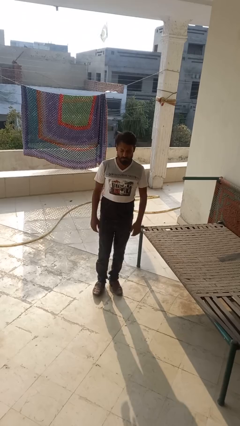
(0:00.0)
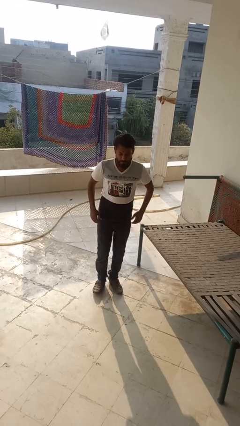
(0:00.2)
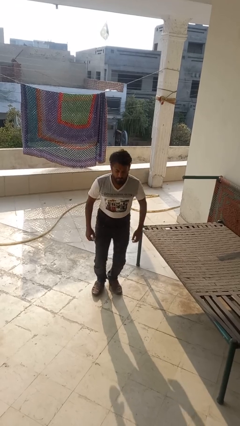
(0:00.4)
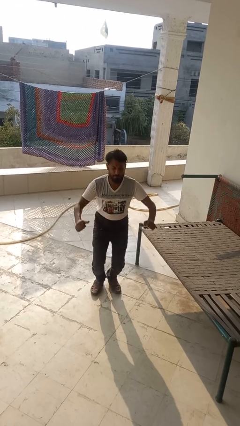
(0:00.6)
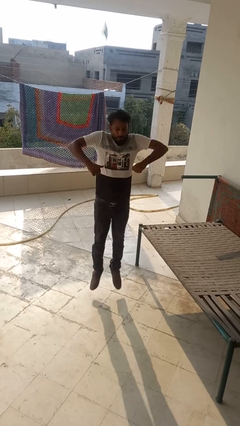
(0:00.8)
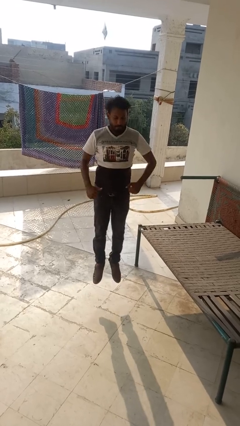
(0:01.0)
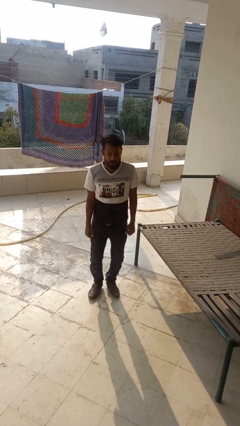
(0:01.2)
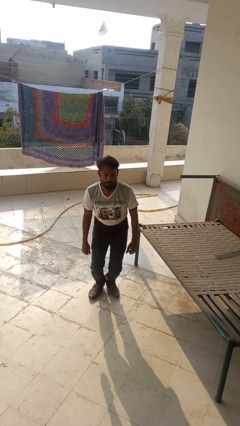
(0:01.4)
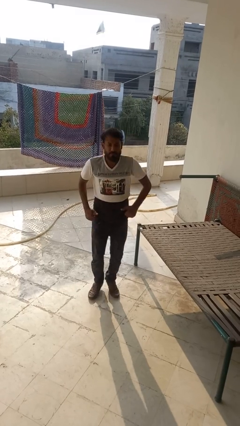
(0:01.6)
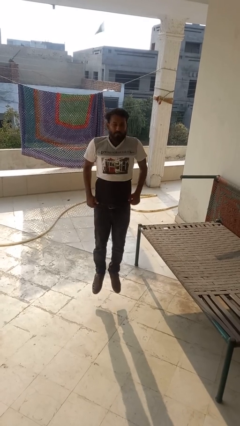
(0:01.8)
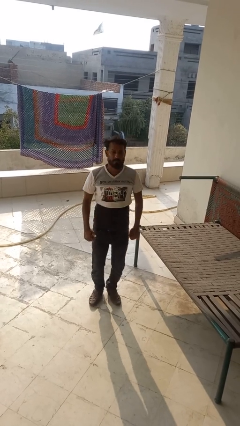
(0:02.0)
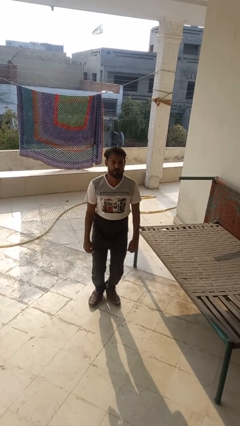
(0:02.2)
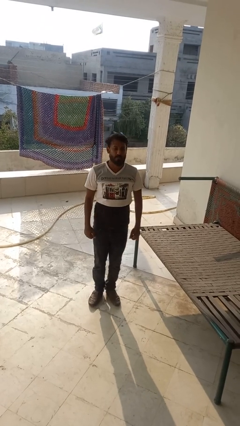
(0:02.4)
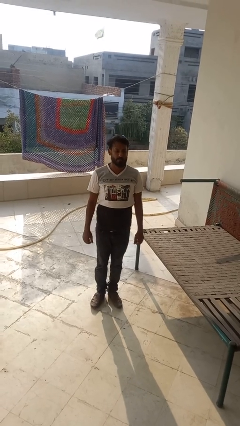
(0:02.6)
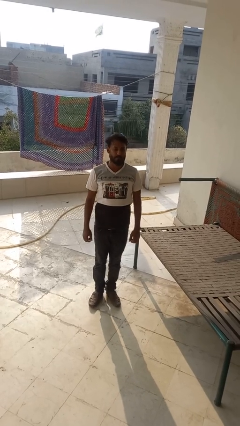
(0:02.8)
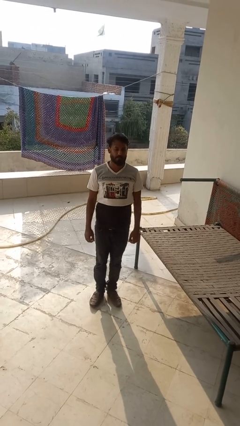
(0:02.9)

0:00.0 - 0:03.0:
person jumps

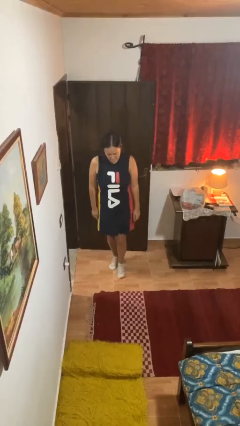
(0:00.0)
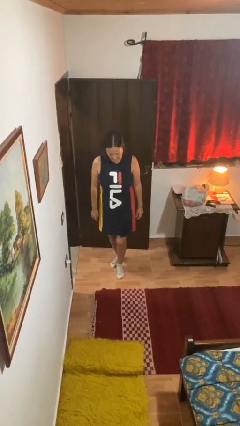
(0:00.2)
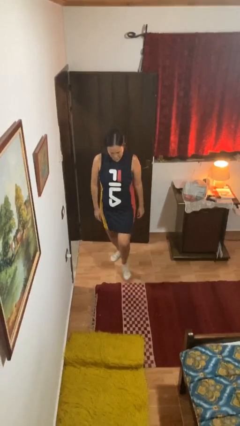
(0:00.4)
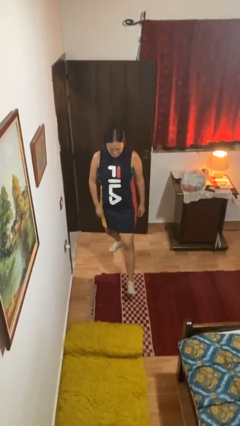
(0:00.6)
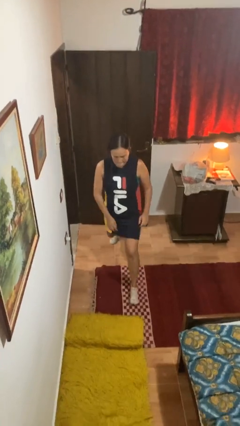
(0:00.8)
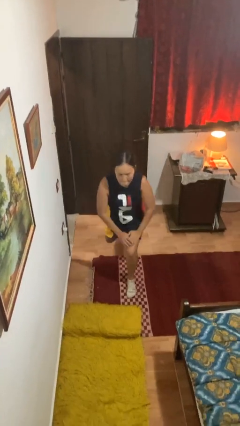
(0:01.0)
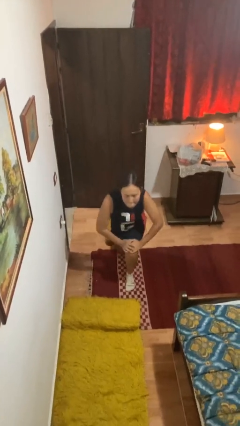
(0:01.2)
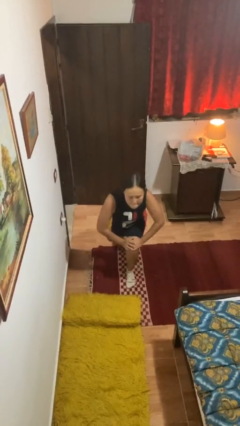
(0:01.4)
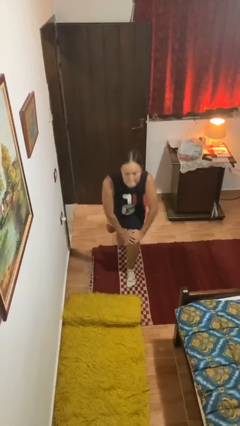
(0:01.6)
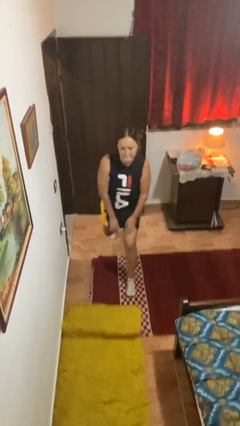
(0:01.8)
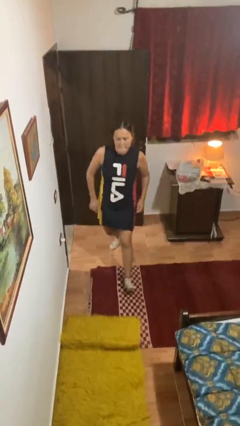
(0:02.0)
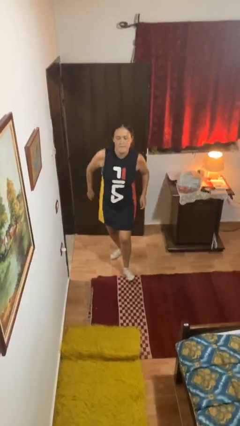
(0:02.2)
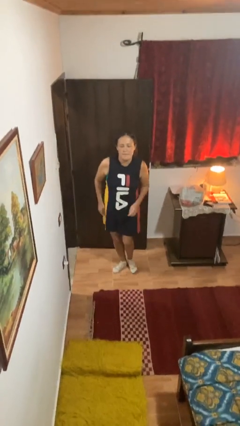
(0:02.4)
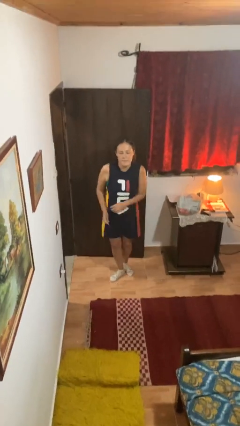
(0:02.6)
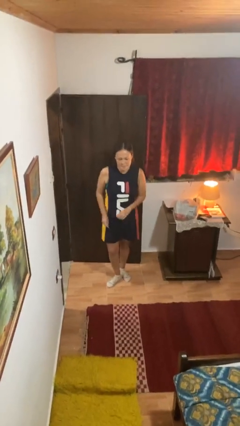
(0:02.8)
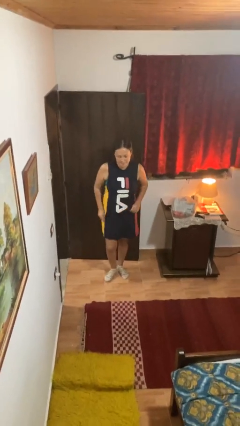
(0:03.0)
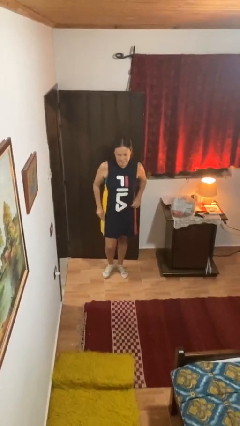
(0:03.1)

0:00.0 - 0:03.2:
person exercises with lunges

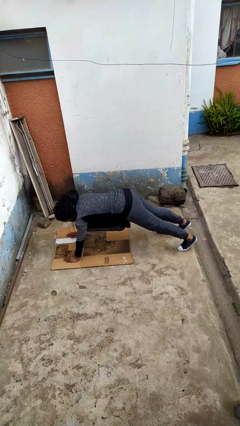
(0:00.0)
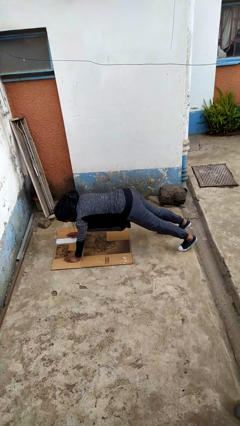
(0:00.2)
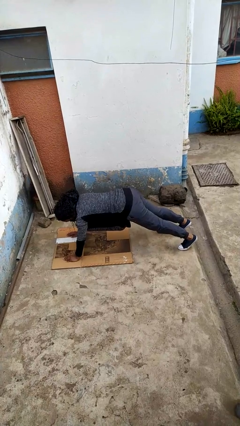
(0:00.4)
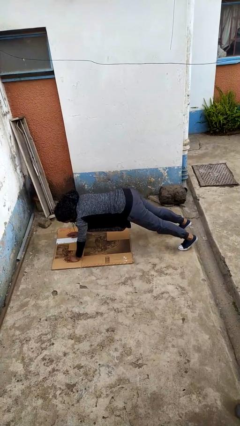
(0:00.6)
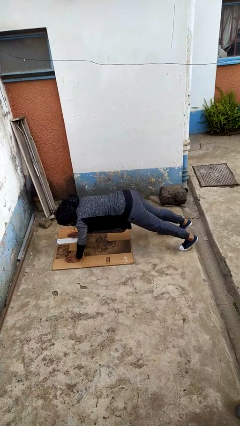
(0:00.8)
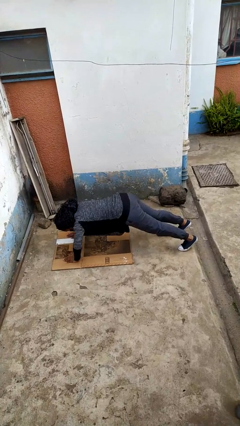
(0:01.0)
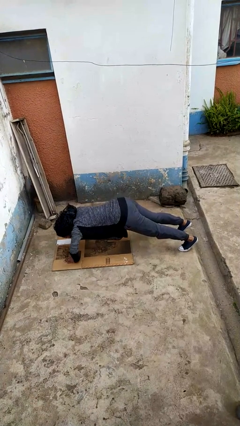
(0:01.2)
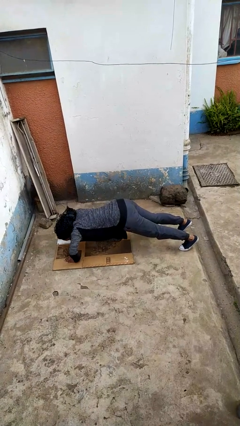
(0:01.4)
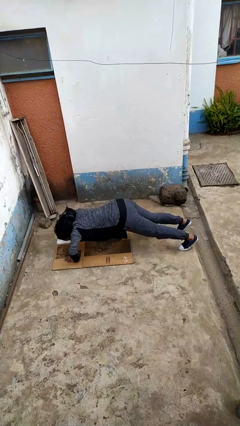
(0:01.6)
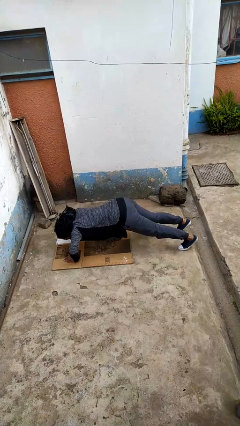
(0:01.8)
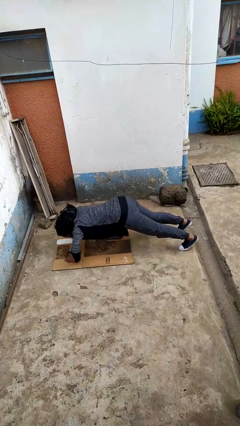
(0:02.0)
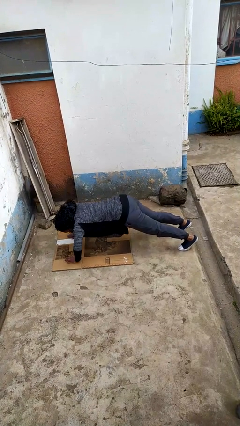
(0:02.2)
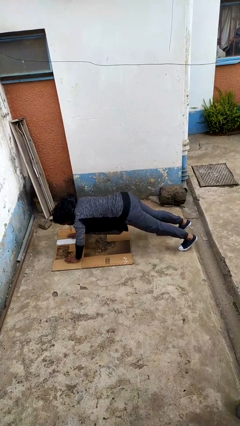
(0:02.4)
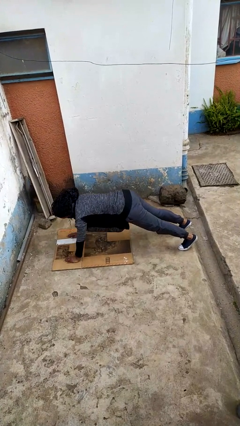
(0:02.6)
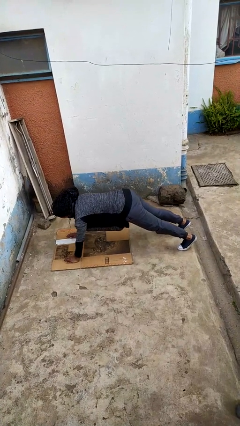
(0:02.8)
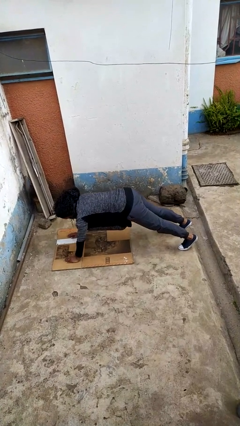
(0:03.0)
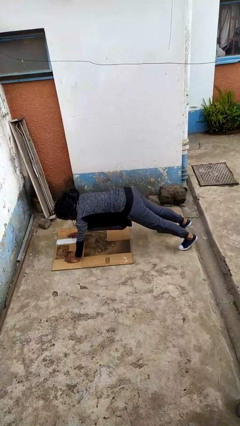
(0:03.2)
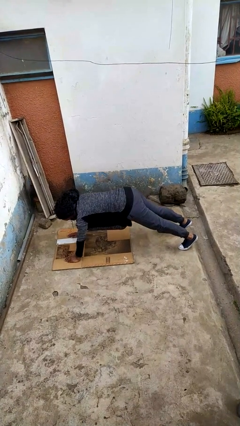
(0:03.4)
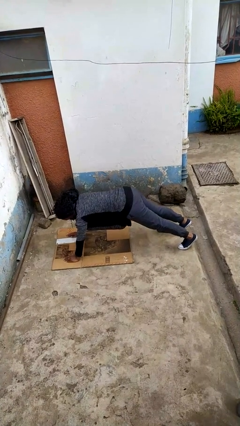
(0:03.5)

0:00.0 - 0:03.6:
person exercises with pushup

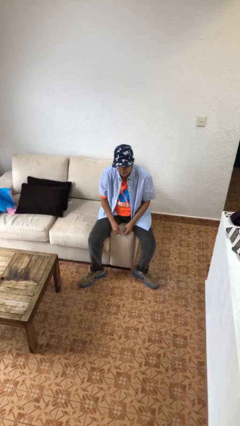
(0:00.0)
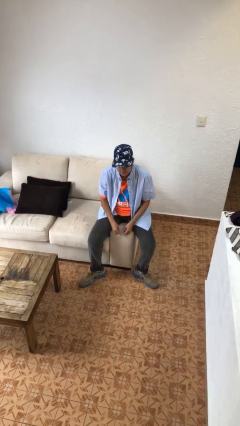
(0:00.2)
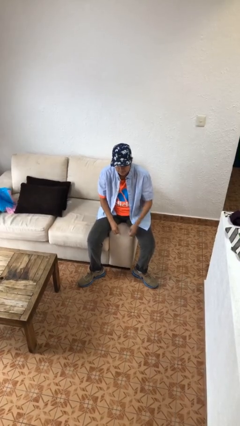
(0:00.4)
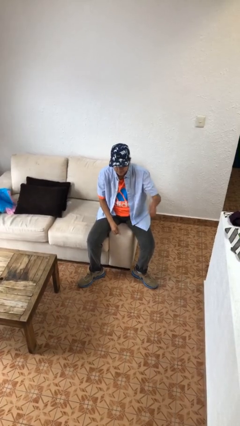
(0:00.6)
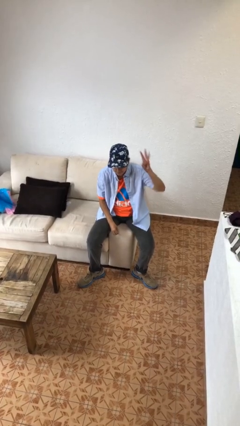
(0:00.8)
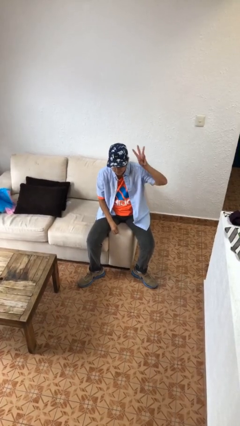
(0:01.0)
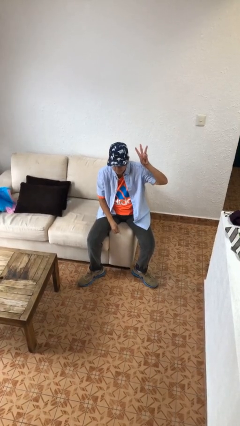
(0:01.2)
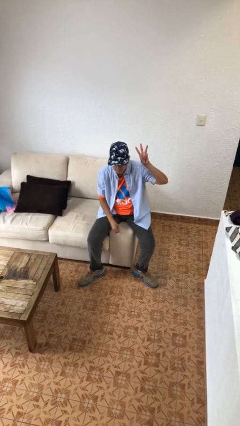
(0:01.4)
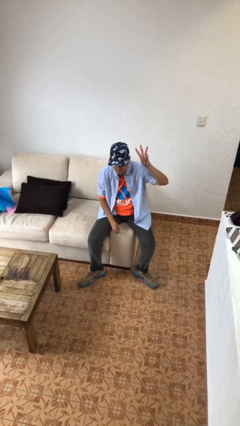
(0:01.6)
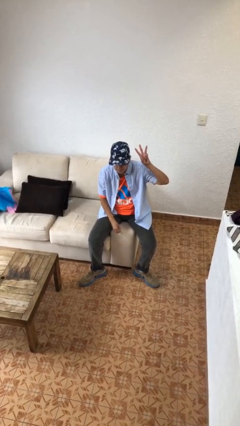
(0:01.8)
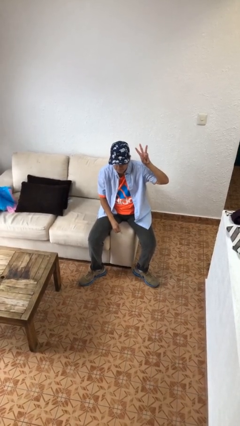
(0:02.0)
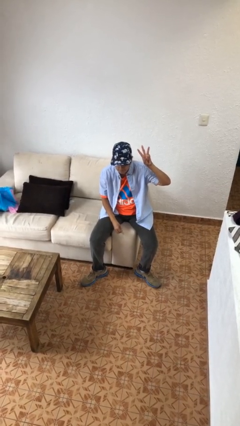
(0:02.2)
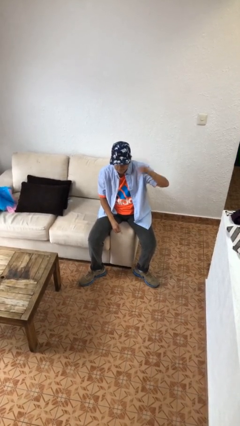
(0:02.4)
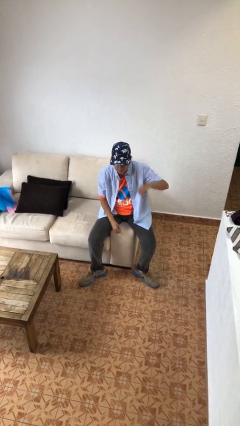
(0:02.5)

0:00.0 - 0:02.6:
person gestures number three

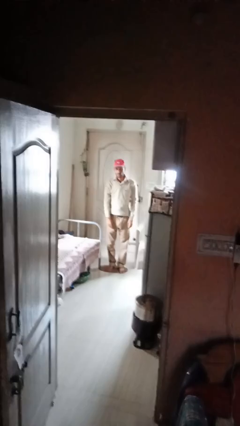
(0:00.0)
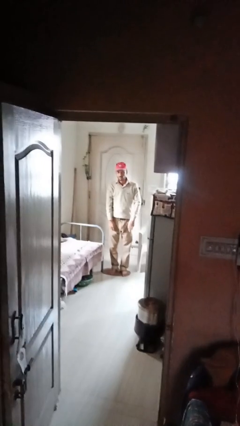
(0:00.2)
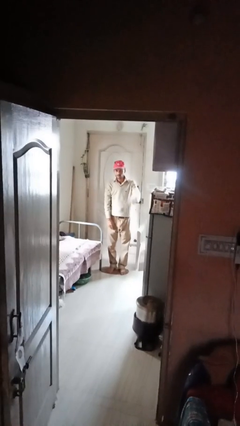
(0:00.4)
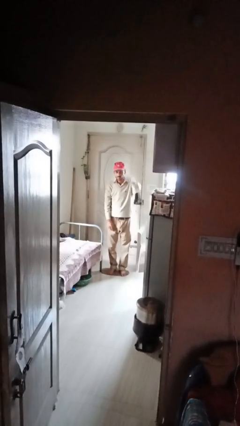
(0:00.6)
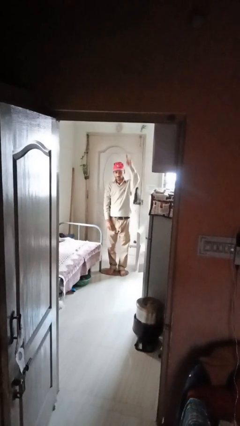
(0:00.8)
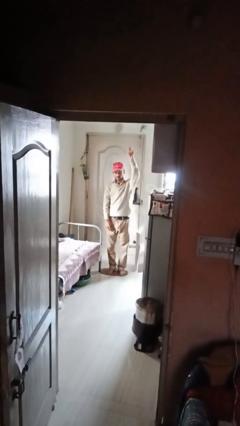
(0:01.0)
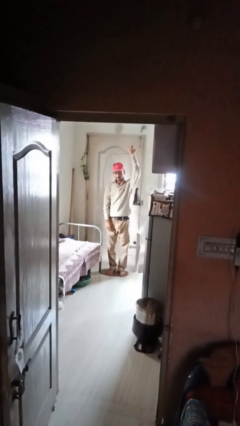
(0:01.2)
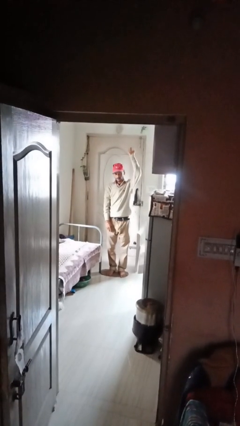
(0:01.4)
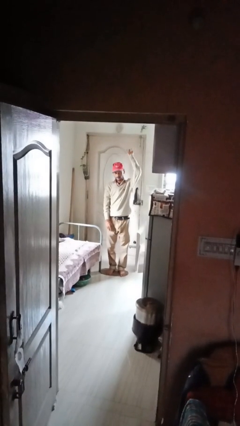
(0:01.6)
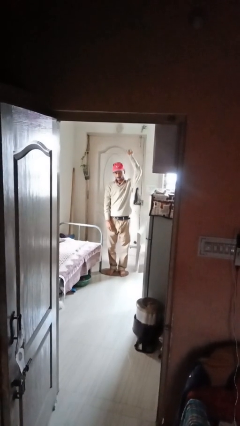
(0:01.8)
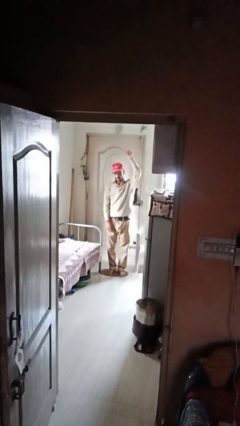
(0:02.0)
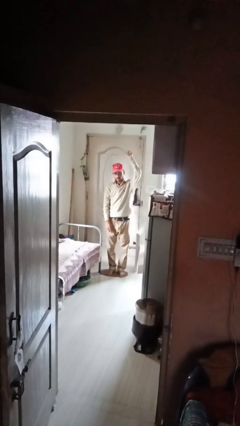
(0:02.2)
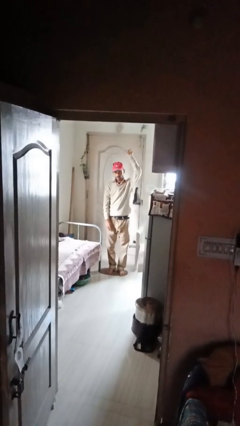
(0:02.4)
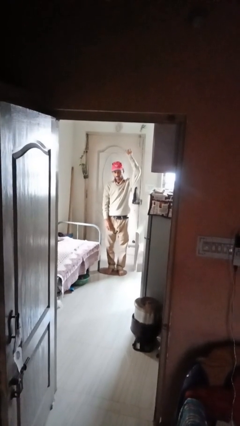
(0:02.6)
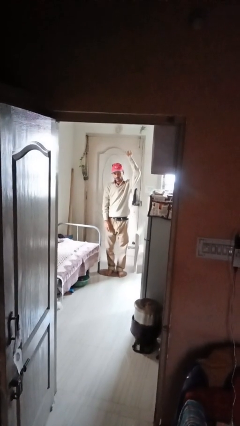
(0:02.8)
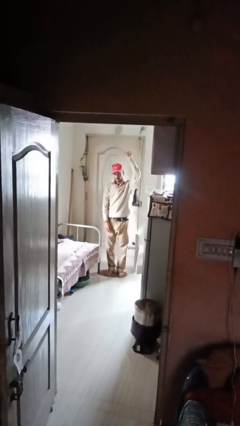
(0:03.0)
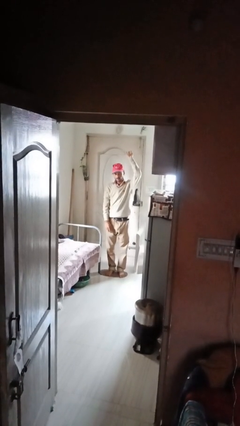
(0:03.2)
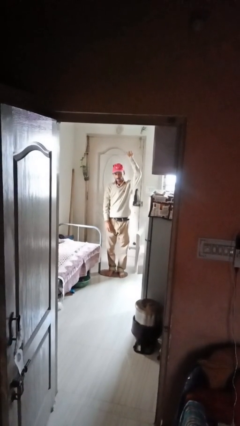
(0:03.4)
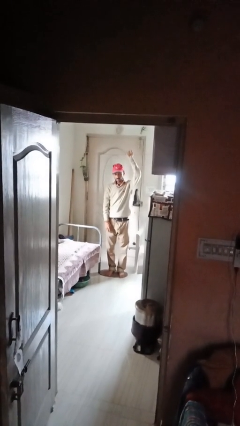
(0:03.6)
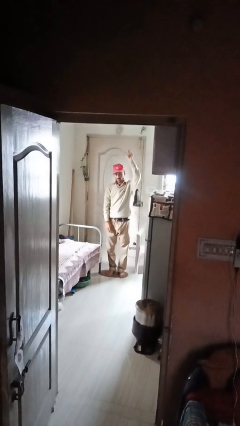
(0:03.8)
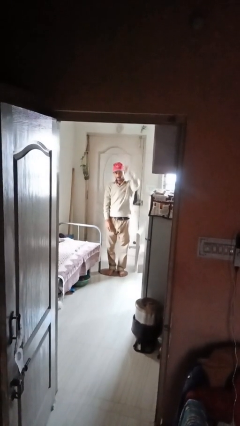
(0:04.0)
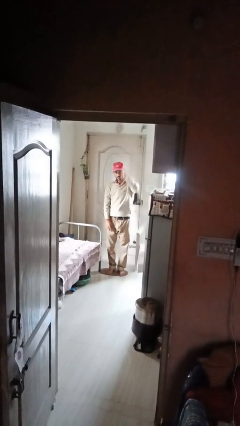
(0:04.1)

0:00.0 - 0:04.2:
person gestures swipe up

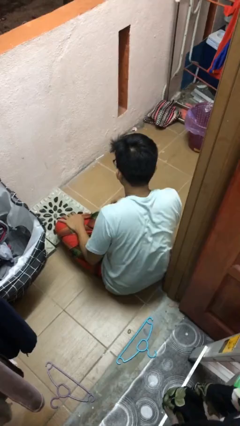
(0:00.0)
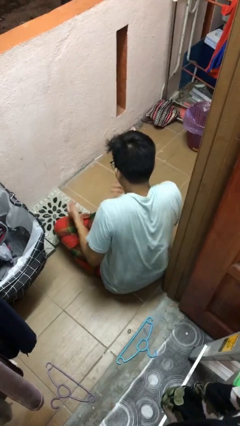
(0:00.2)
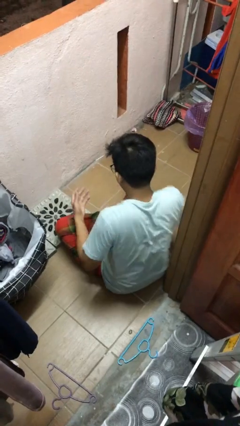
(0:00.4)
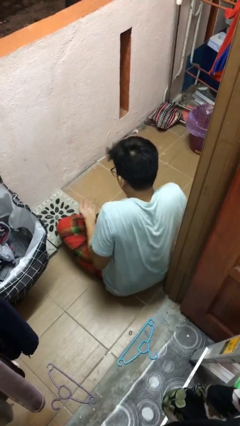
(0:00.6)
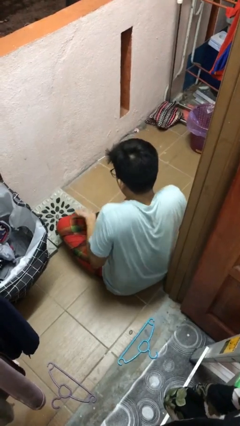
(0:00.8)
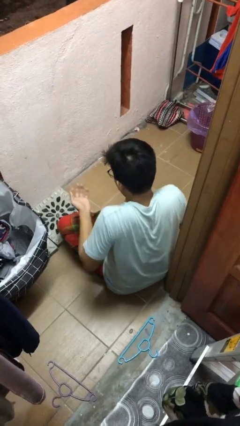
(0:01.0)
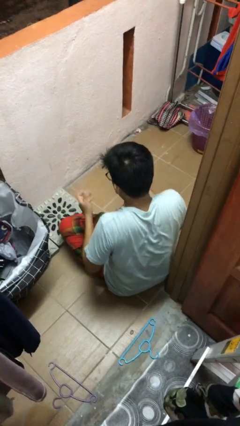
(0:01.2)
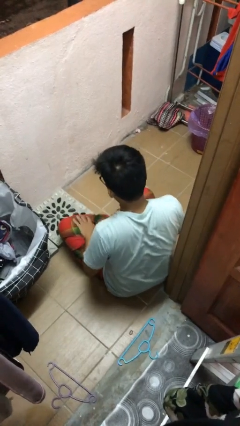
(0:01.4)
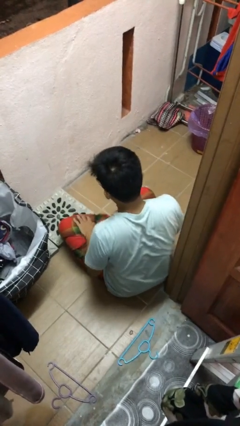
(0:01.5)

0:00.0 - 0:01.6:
person shrugs
